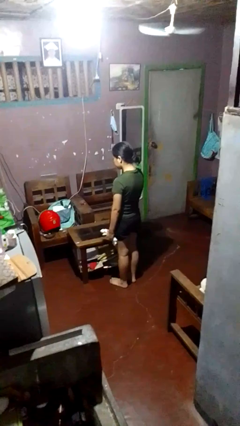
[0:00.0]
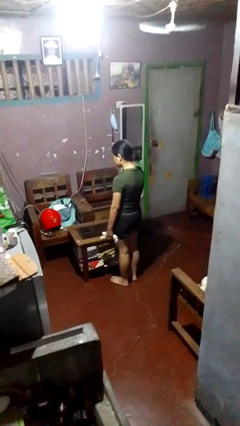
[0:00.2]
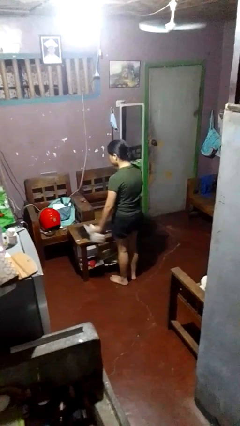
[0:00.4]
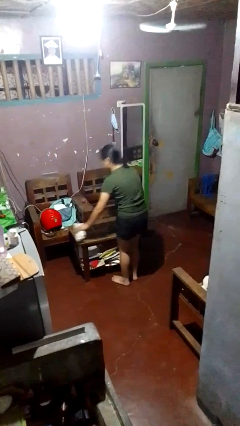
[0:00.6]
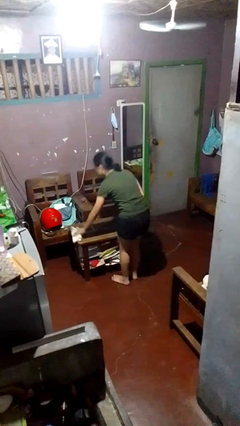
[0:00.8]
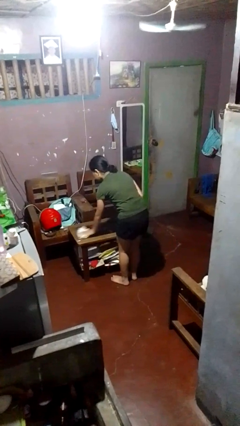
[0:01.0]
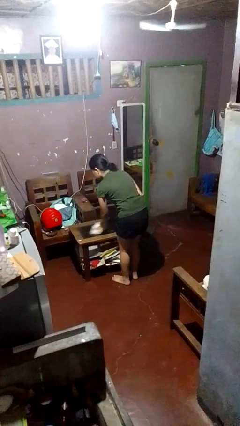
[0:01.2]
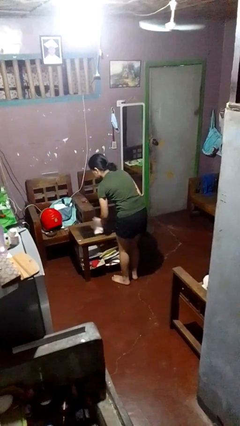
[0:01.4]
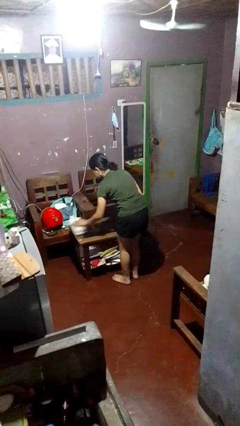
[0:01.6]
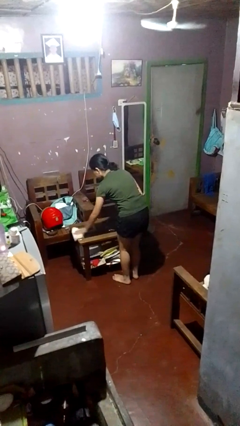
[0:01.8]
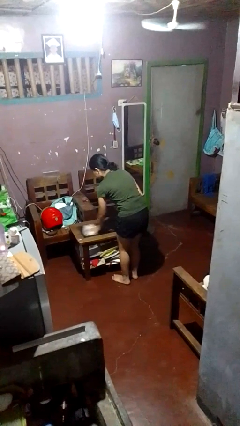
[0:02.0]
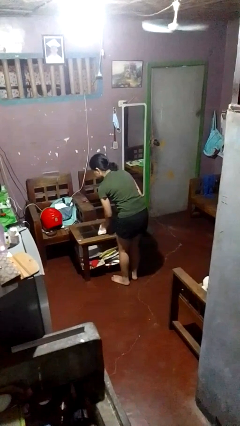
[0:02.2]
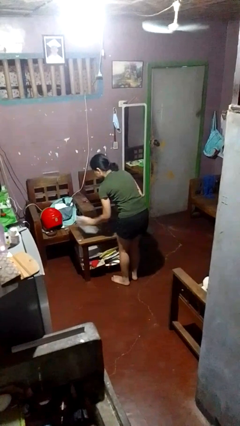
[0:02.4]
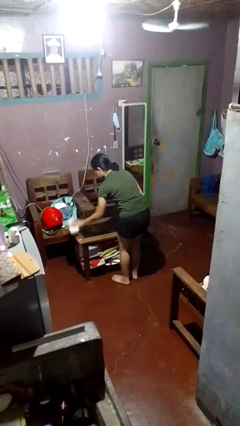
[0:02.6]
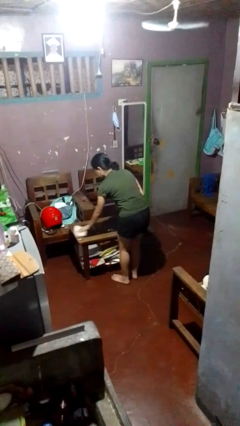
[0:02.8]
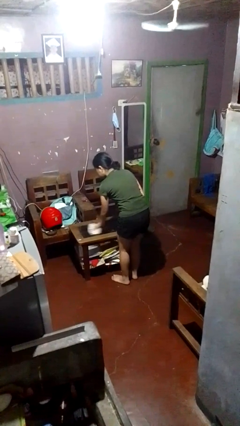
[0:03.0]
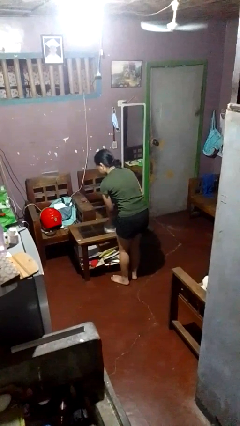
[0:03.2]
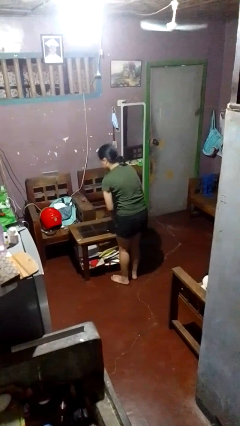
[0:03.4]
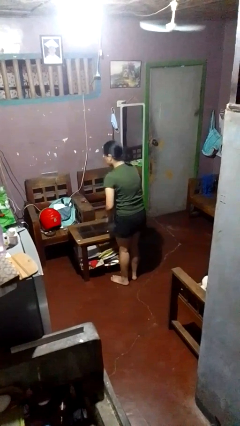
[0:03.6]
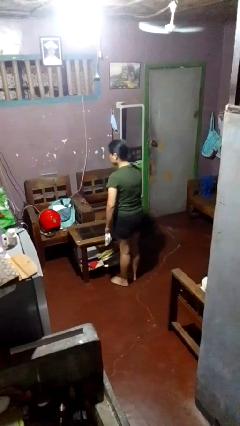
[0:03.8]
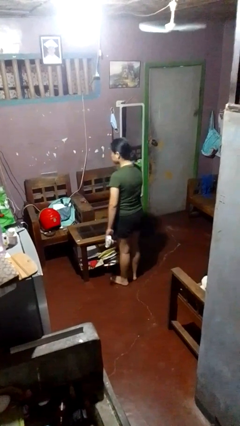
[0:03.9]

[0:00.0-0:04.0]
person cleans table with rag

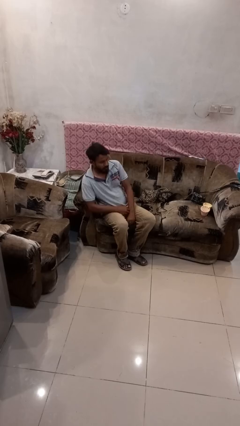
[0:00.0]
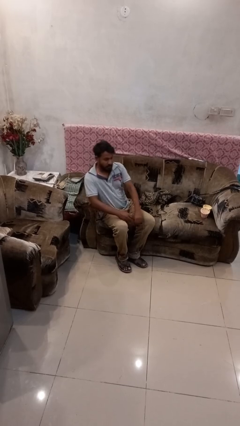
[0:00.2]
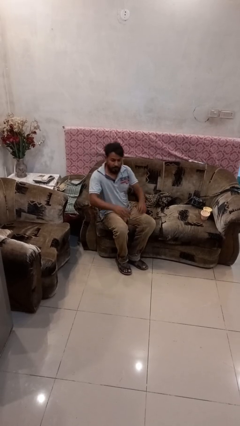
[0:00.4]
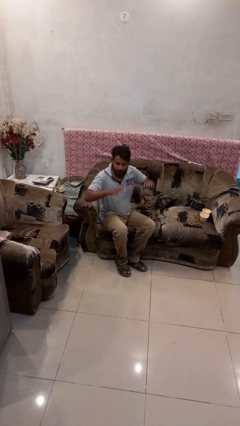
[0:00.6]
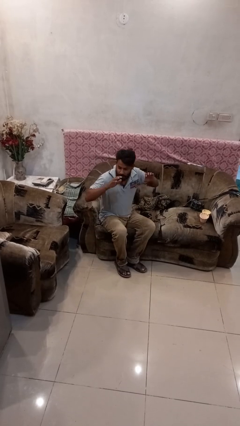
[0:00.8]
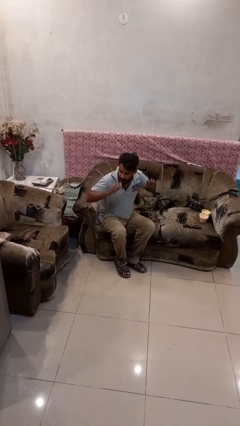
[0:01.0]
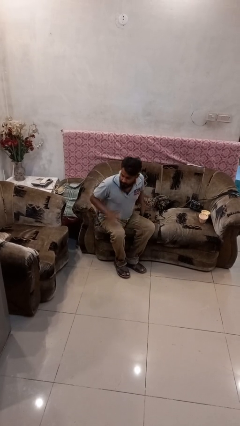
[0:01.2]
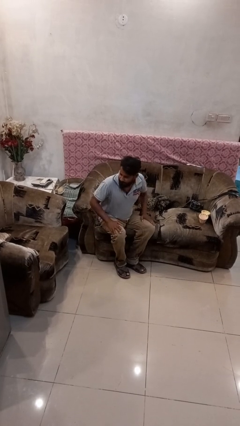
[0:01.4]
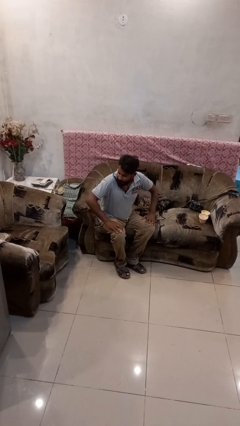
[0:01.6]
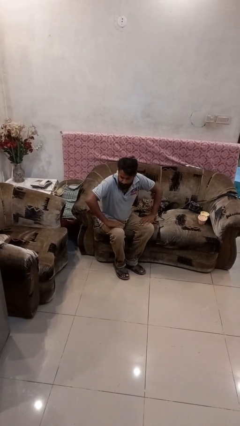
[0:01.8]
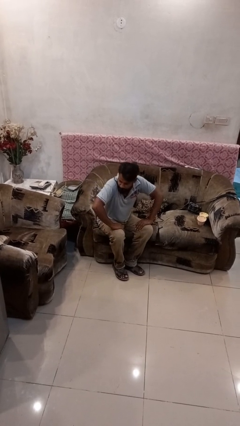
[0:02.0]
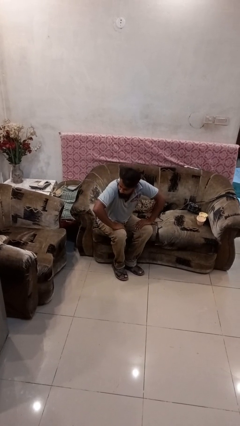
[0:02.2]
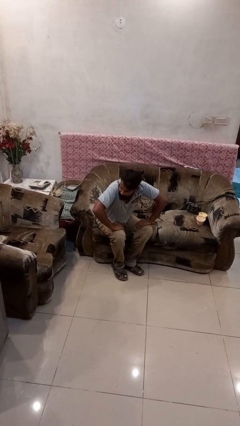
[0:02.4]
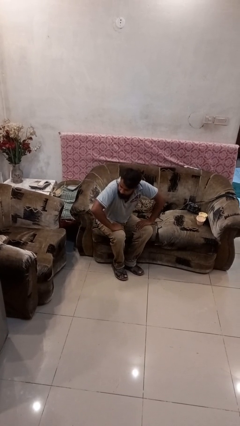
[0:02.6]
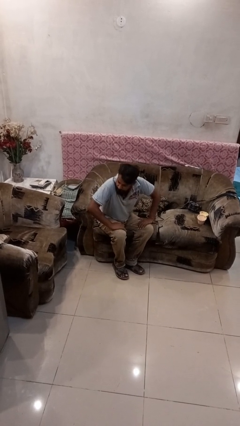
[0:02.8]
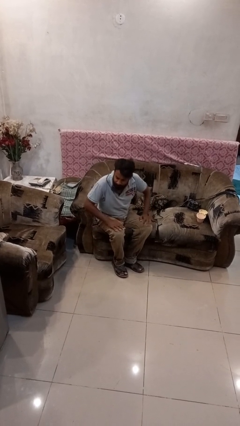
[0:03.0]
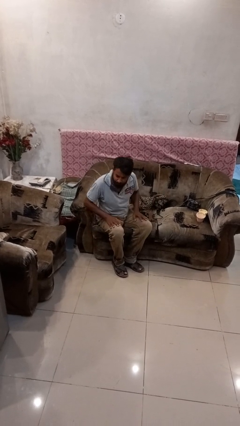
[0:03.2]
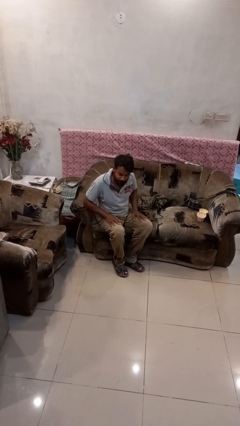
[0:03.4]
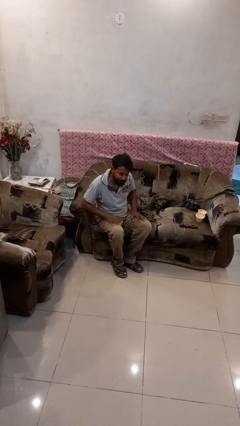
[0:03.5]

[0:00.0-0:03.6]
person slaps hands on thighs

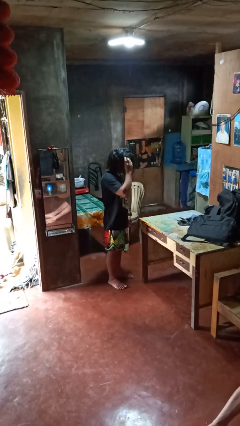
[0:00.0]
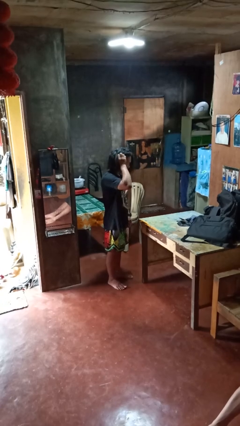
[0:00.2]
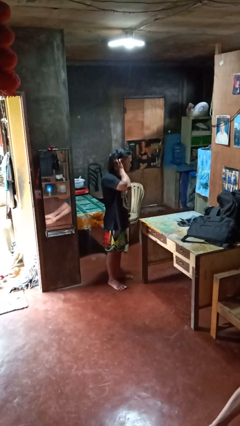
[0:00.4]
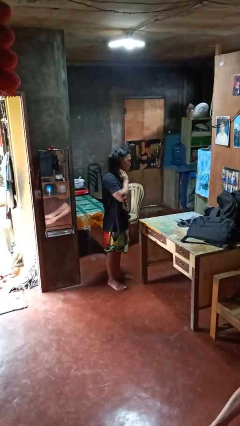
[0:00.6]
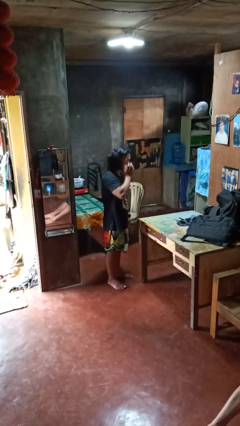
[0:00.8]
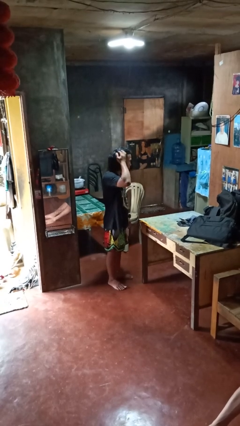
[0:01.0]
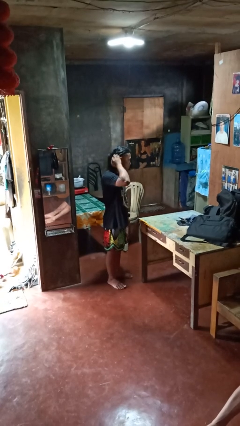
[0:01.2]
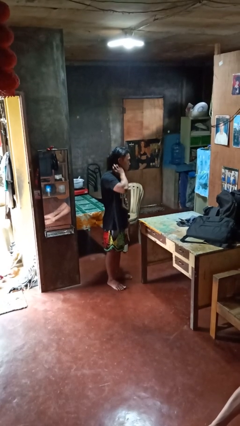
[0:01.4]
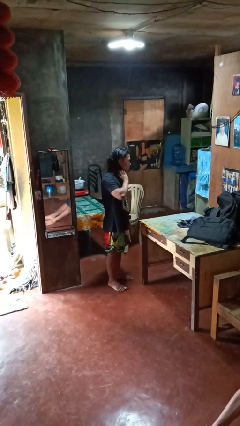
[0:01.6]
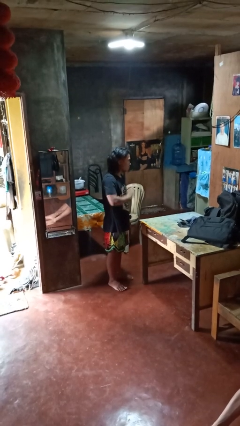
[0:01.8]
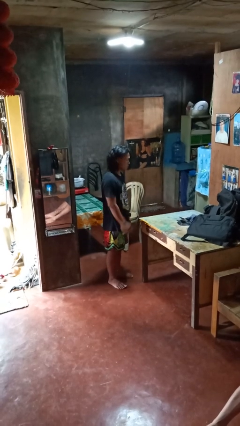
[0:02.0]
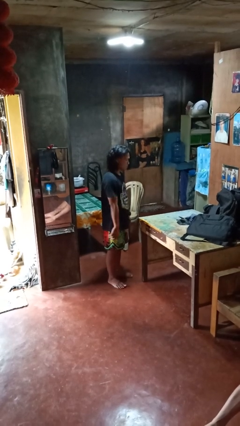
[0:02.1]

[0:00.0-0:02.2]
person strokes hair

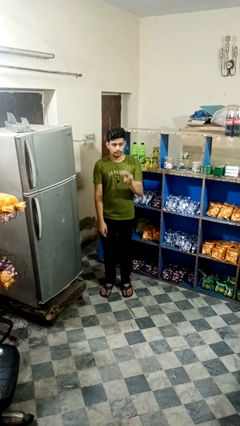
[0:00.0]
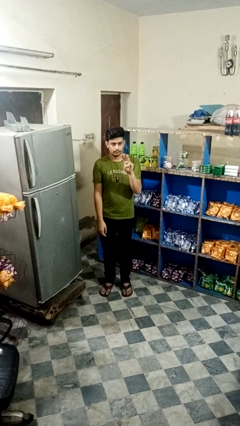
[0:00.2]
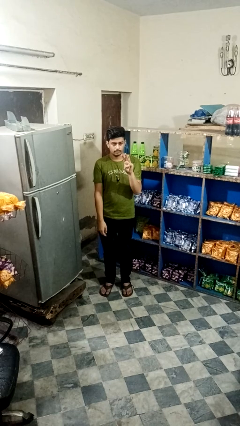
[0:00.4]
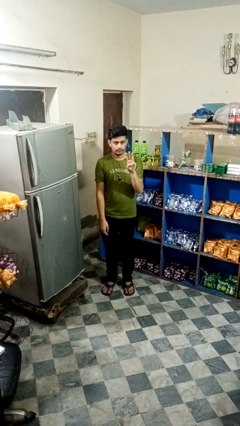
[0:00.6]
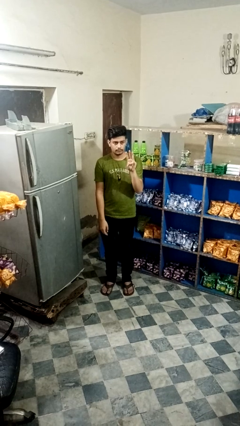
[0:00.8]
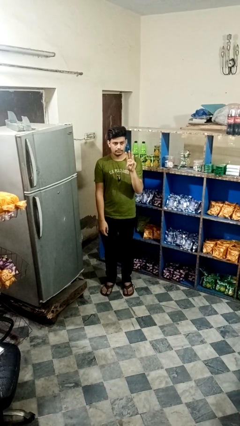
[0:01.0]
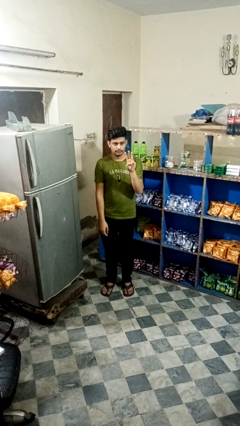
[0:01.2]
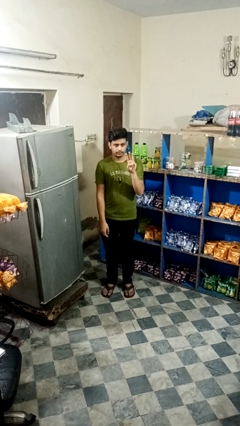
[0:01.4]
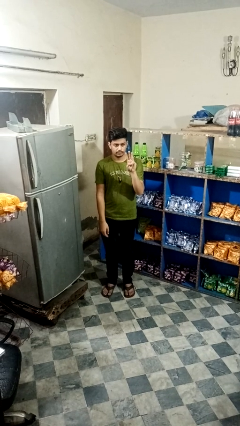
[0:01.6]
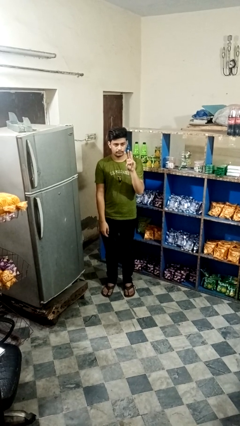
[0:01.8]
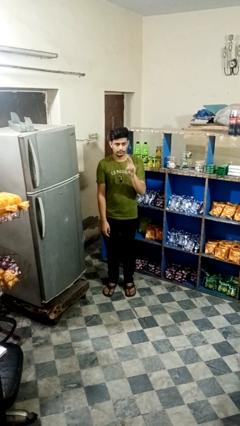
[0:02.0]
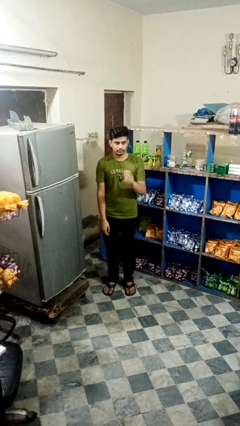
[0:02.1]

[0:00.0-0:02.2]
person gestures number three

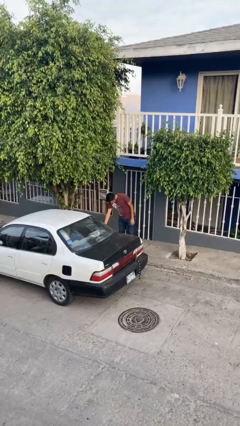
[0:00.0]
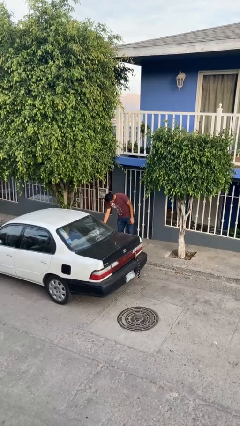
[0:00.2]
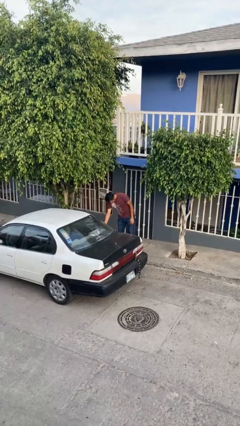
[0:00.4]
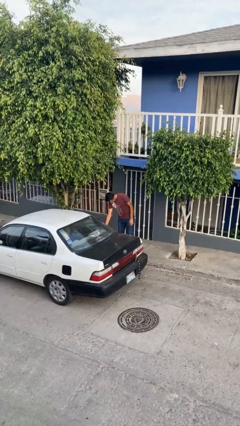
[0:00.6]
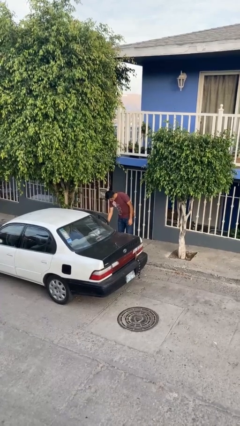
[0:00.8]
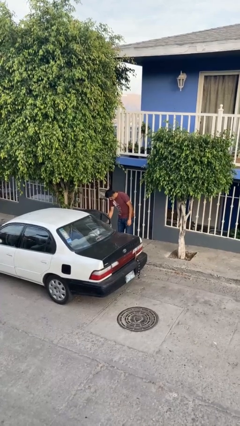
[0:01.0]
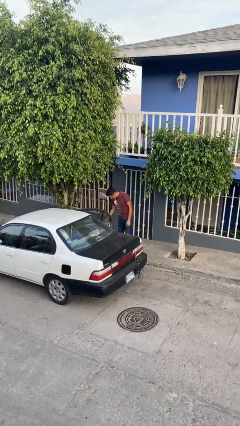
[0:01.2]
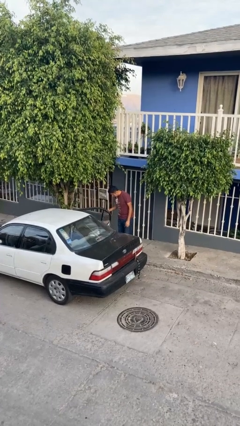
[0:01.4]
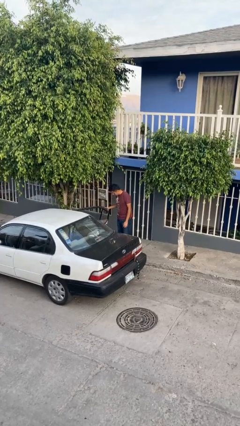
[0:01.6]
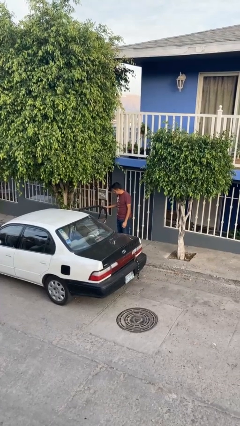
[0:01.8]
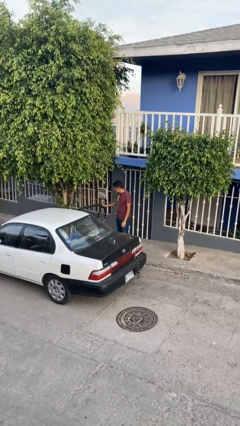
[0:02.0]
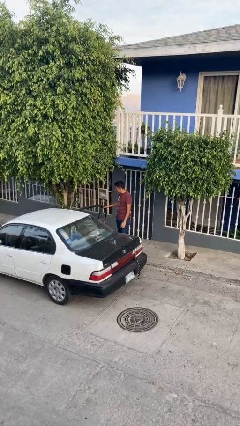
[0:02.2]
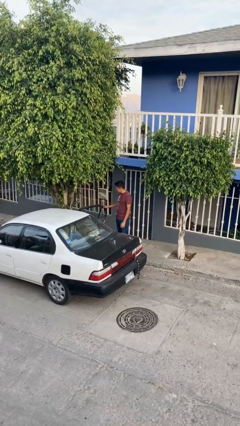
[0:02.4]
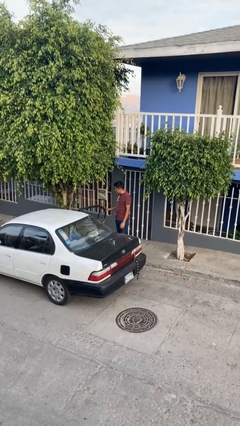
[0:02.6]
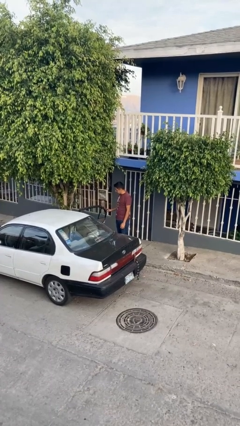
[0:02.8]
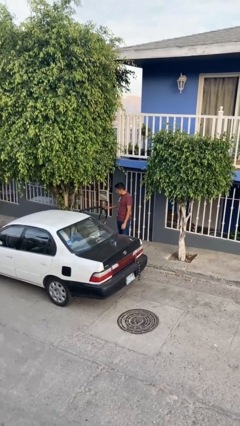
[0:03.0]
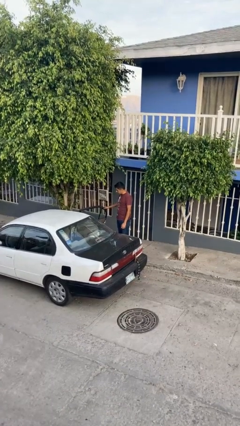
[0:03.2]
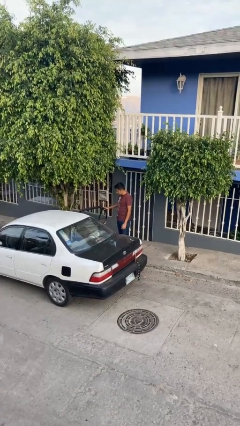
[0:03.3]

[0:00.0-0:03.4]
person opens car door

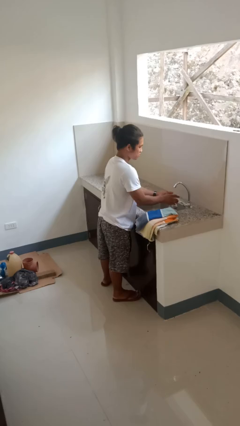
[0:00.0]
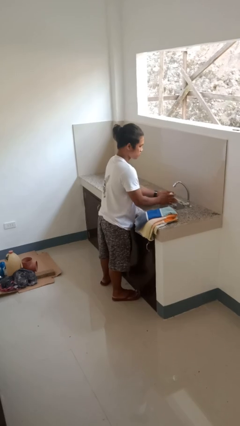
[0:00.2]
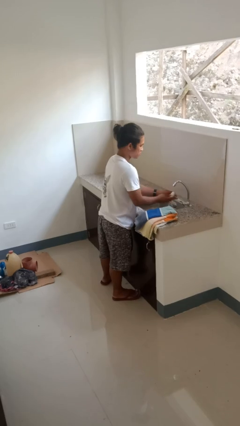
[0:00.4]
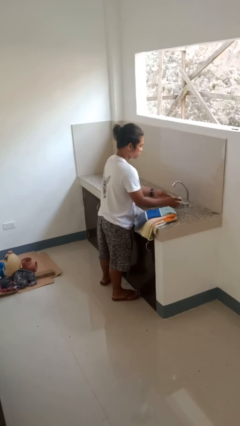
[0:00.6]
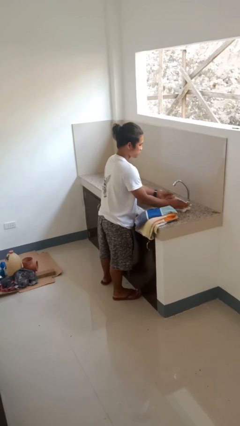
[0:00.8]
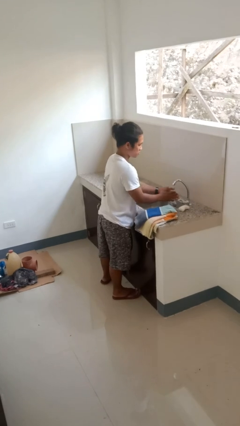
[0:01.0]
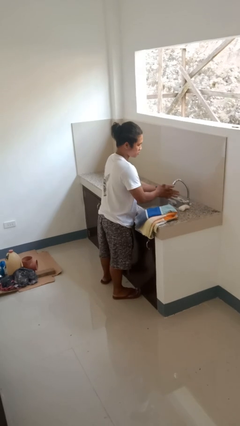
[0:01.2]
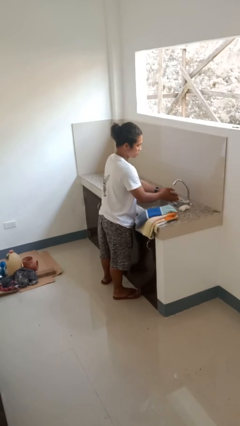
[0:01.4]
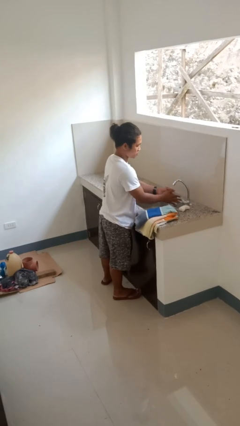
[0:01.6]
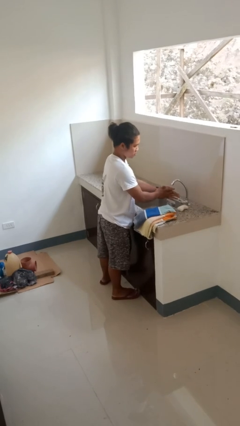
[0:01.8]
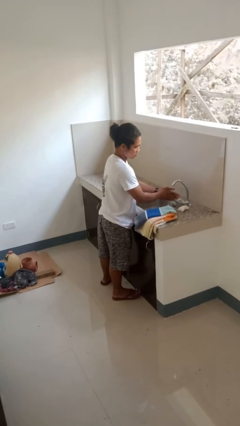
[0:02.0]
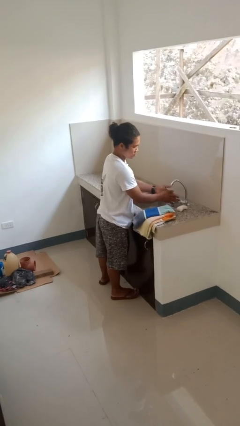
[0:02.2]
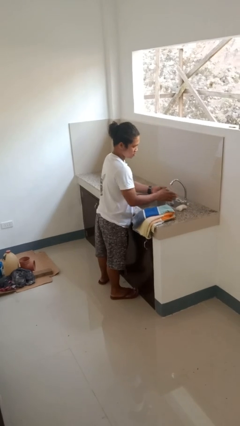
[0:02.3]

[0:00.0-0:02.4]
person washes hands
